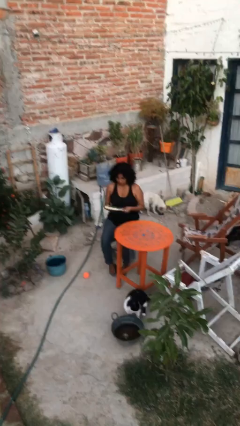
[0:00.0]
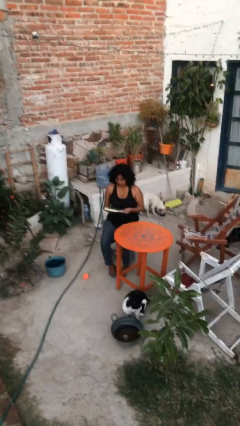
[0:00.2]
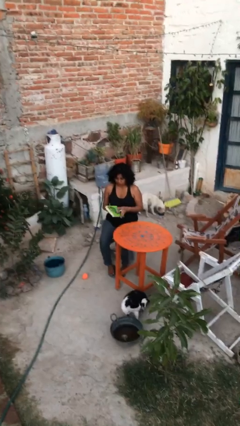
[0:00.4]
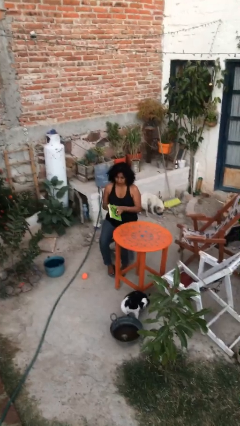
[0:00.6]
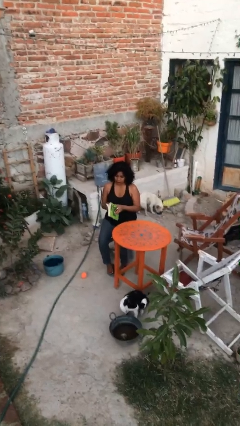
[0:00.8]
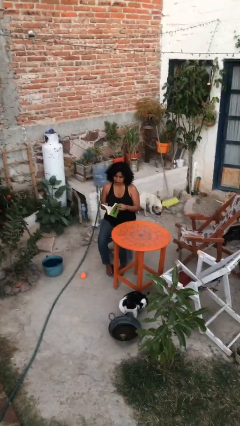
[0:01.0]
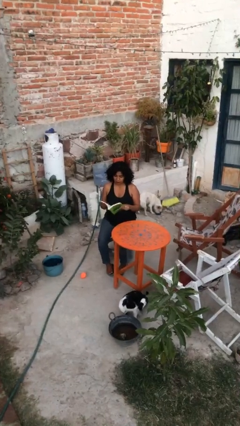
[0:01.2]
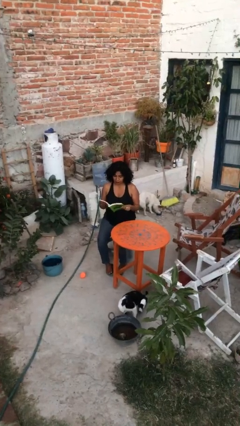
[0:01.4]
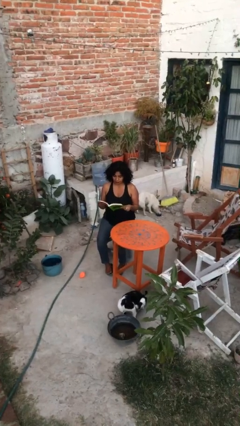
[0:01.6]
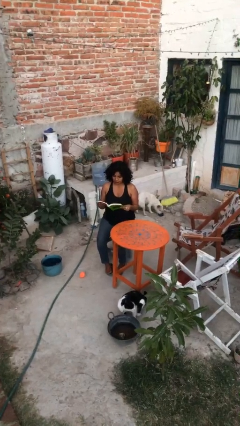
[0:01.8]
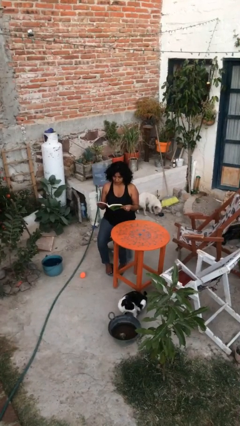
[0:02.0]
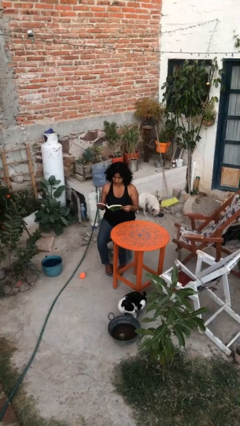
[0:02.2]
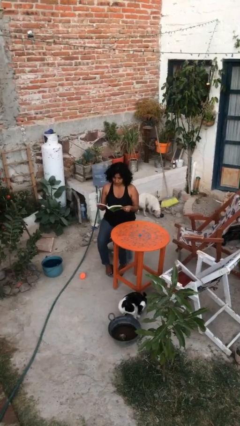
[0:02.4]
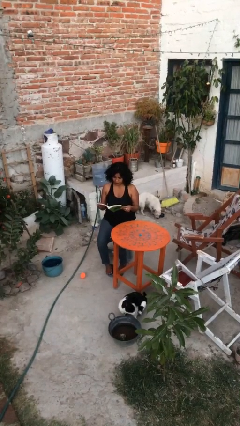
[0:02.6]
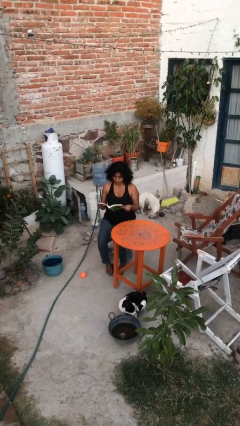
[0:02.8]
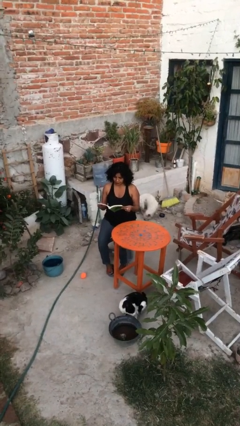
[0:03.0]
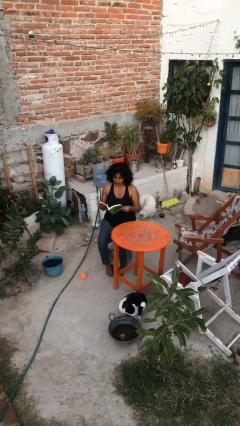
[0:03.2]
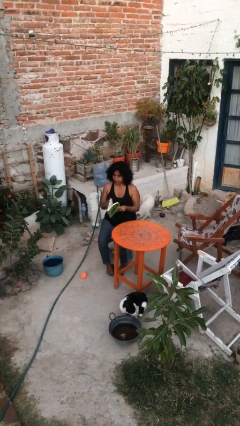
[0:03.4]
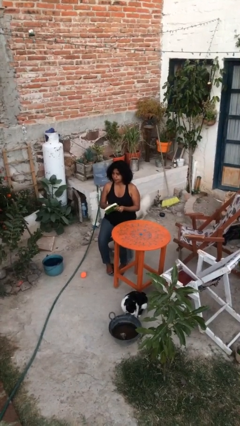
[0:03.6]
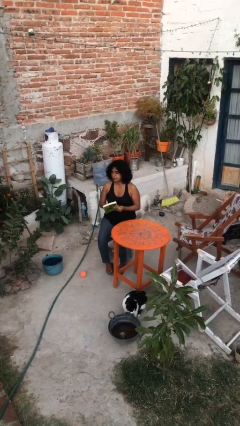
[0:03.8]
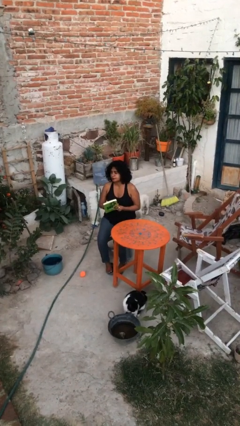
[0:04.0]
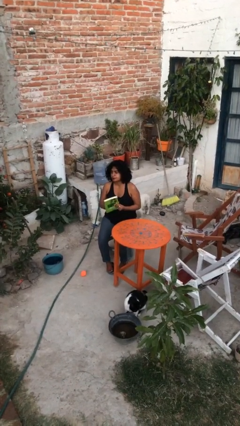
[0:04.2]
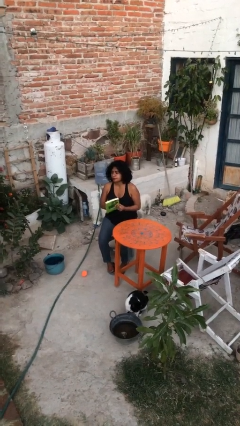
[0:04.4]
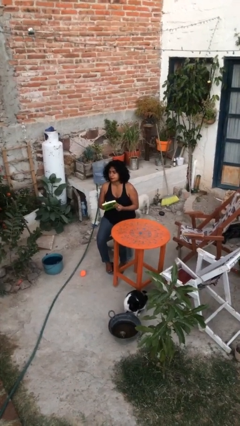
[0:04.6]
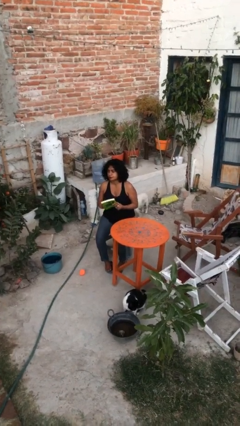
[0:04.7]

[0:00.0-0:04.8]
person reads document

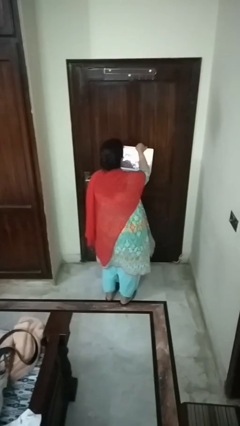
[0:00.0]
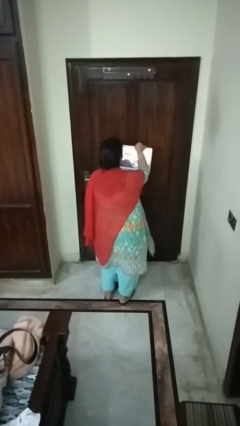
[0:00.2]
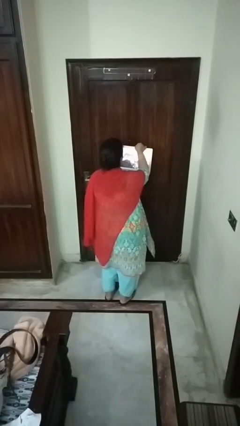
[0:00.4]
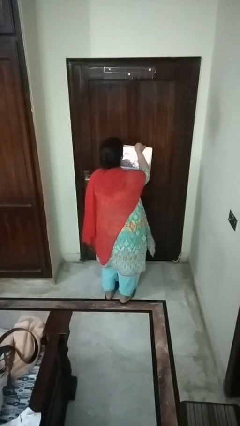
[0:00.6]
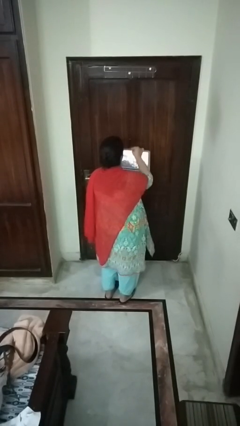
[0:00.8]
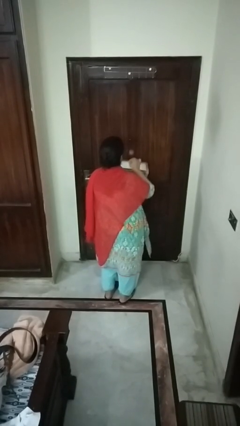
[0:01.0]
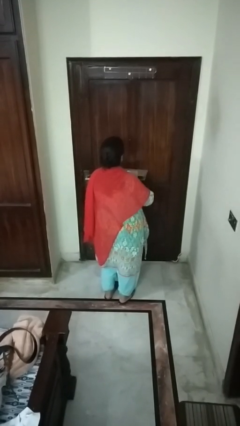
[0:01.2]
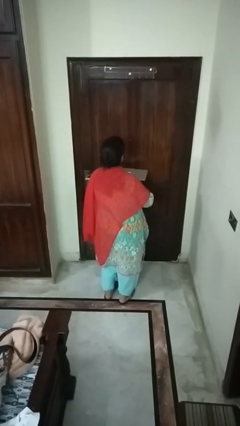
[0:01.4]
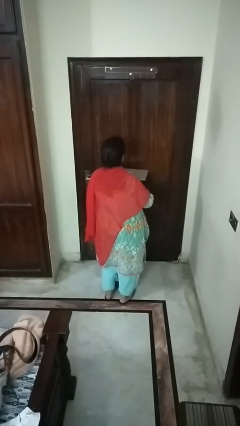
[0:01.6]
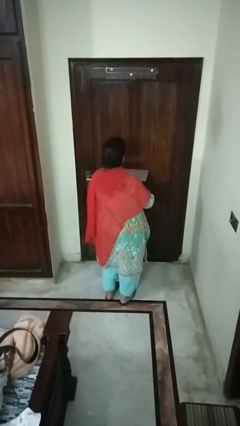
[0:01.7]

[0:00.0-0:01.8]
person closes laptop

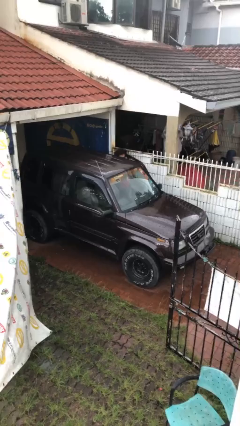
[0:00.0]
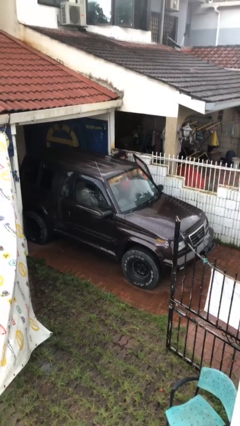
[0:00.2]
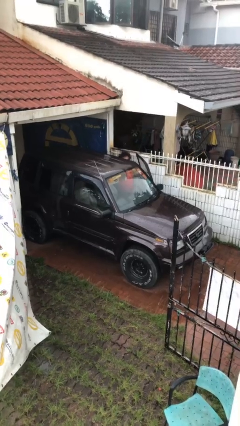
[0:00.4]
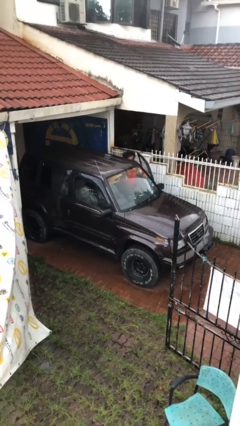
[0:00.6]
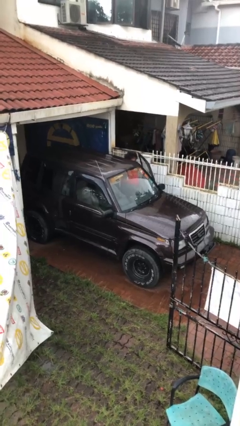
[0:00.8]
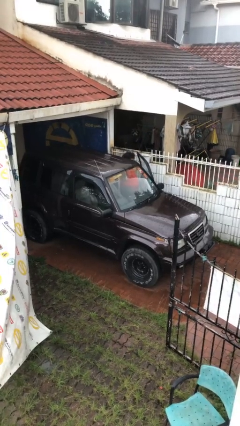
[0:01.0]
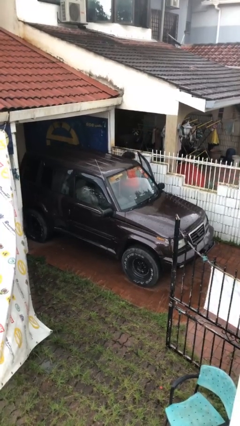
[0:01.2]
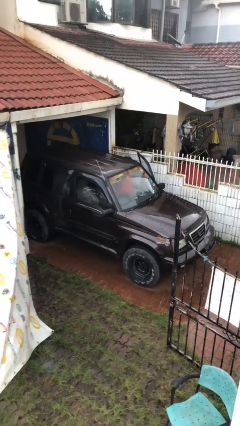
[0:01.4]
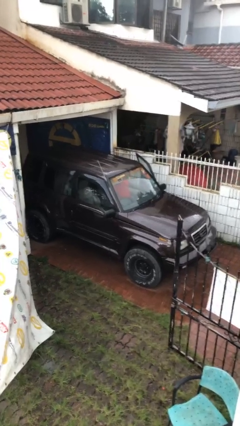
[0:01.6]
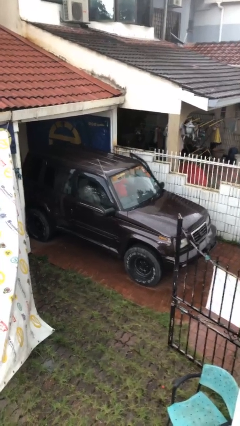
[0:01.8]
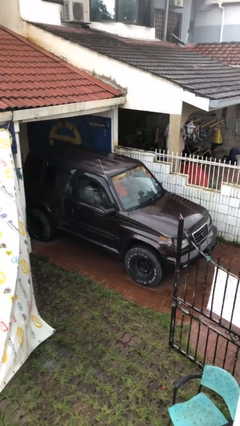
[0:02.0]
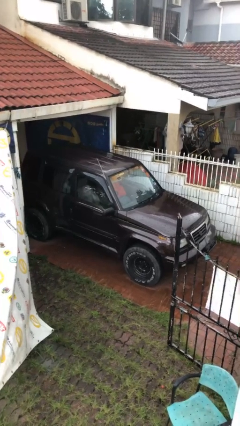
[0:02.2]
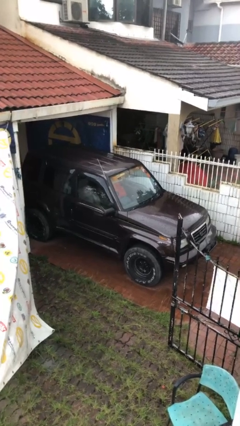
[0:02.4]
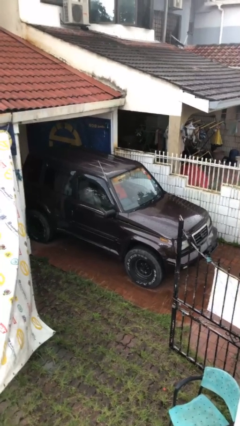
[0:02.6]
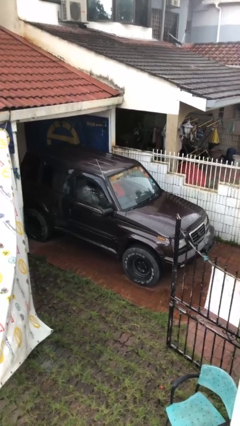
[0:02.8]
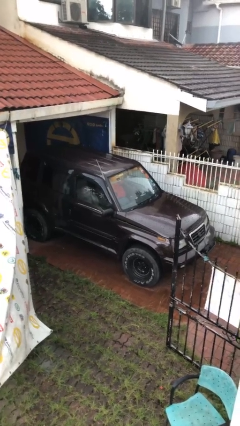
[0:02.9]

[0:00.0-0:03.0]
car picks up person

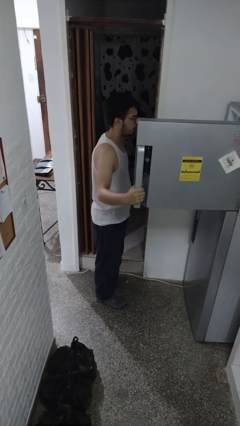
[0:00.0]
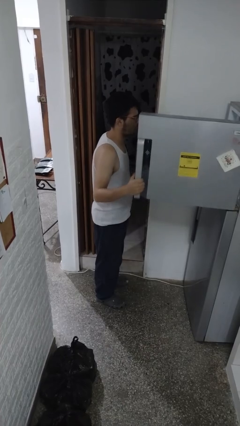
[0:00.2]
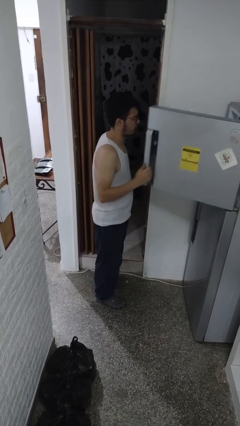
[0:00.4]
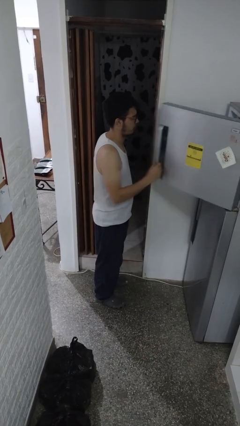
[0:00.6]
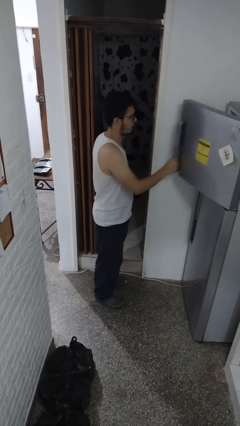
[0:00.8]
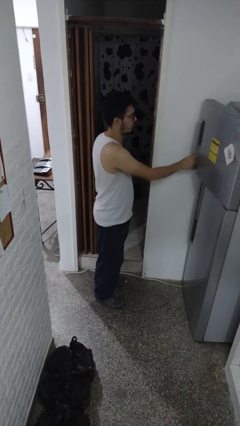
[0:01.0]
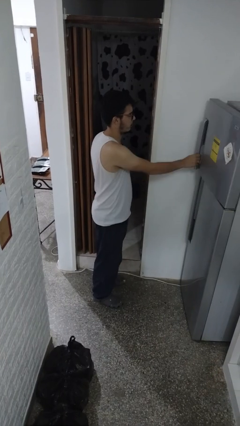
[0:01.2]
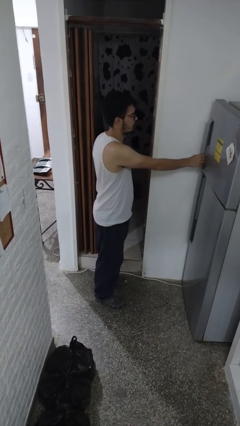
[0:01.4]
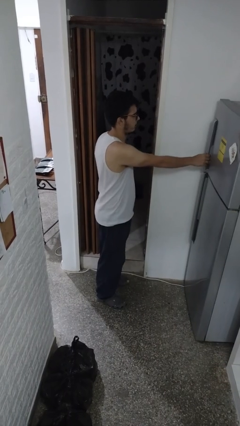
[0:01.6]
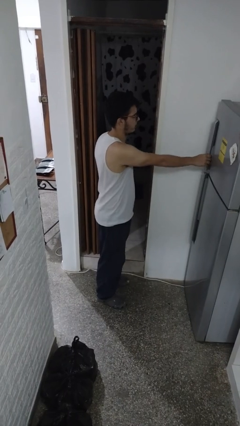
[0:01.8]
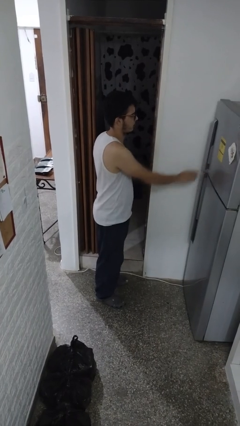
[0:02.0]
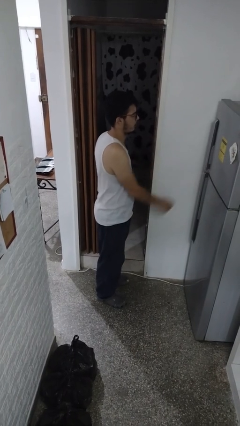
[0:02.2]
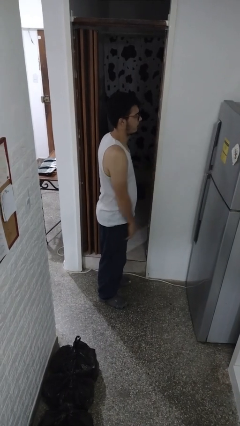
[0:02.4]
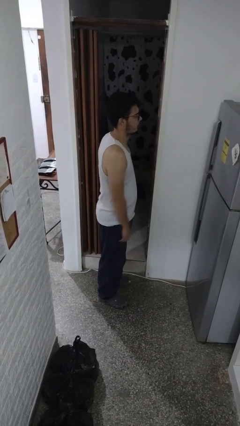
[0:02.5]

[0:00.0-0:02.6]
person closes refrigerator

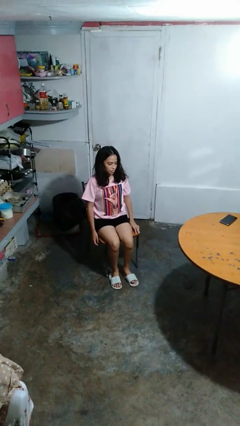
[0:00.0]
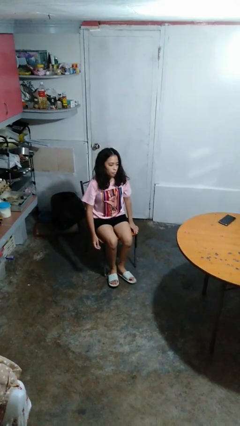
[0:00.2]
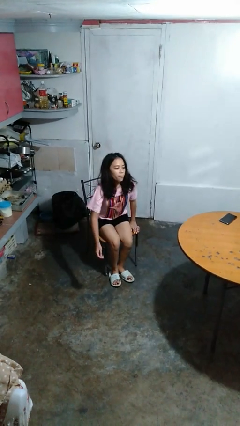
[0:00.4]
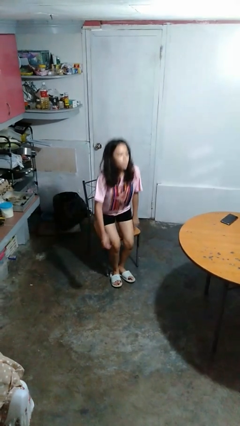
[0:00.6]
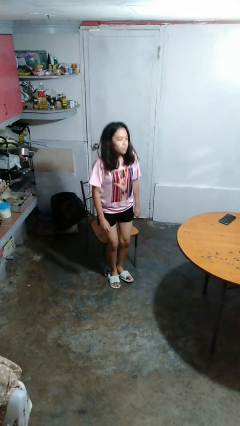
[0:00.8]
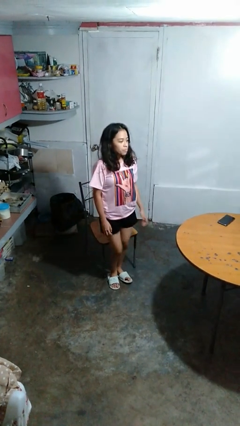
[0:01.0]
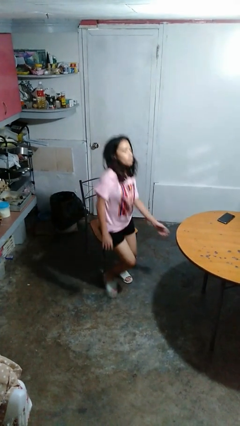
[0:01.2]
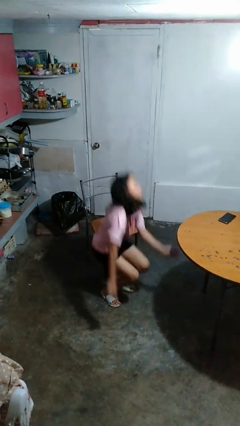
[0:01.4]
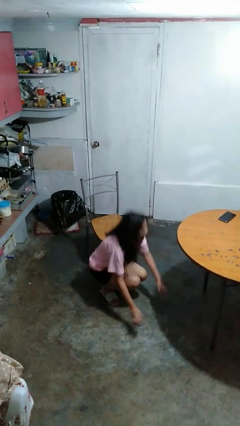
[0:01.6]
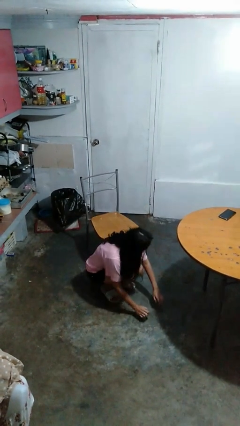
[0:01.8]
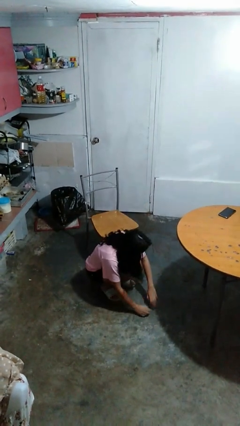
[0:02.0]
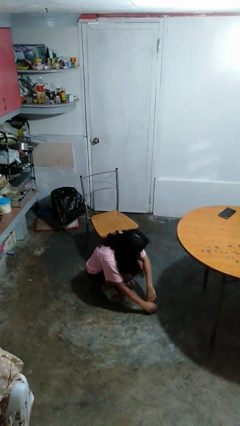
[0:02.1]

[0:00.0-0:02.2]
person falls from chair

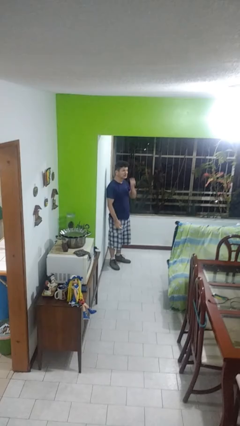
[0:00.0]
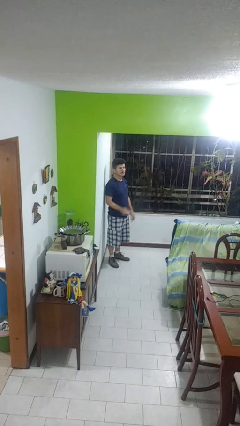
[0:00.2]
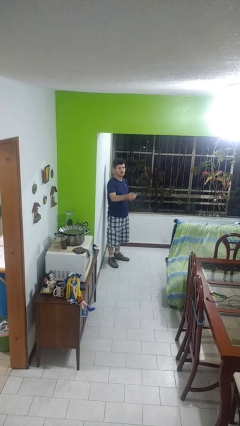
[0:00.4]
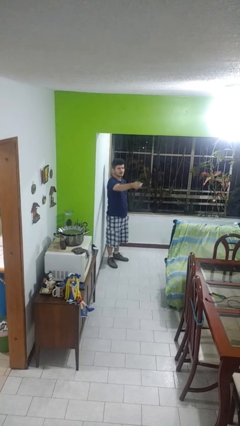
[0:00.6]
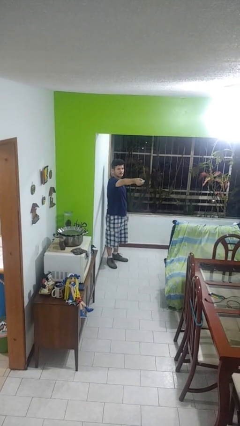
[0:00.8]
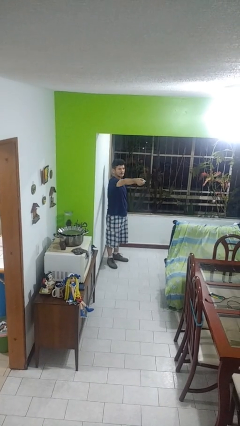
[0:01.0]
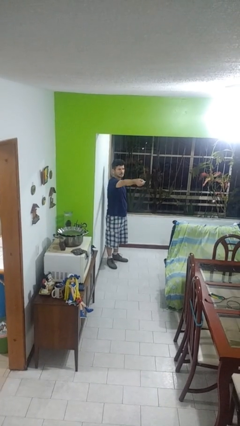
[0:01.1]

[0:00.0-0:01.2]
person uses television remote

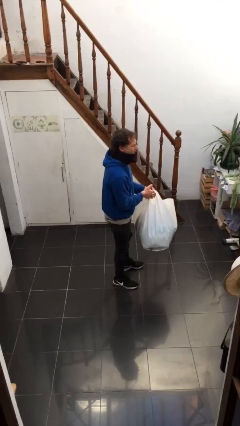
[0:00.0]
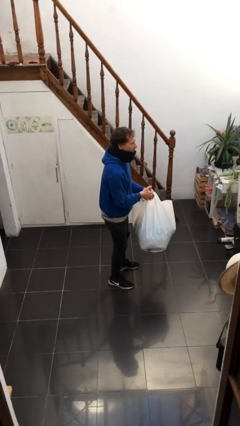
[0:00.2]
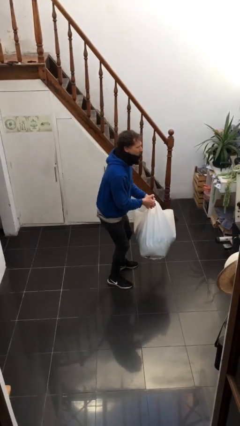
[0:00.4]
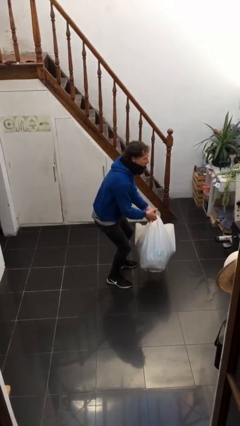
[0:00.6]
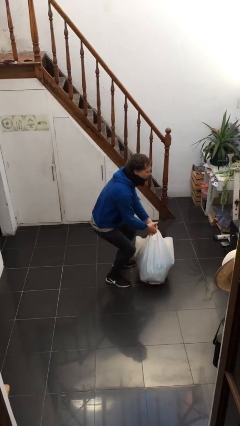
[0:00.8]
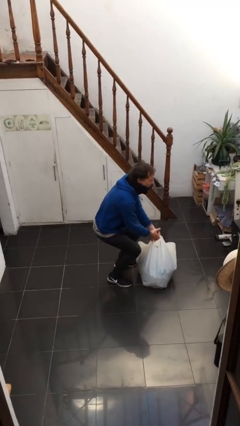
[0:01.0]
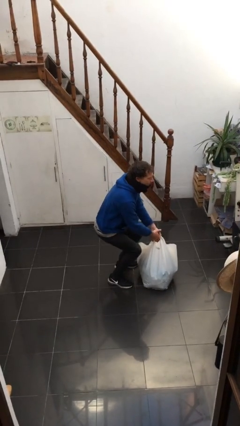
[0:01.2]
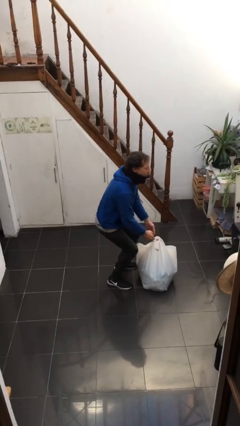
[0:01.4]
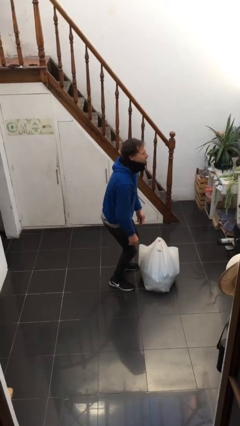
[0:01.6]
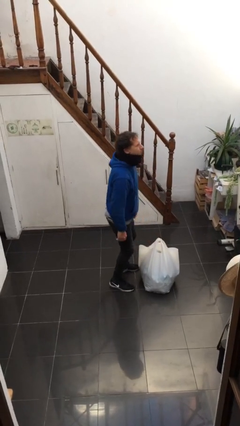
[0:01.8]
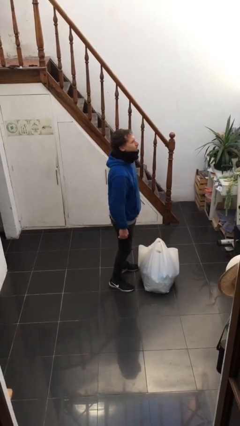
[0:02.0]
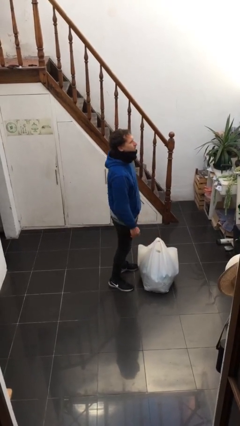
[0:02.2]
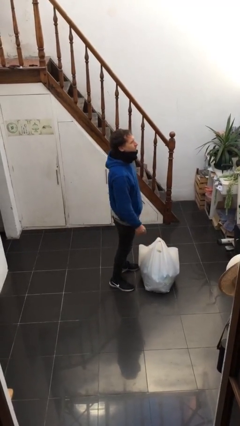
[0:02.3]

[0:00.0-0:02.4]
person puts down object on floor
